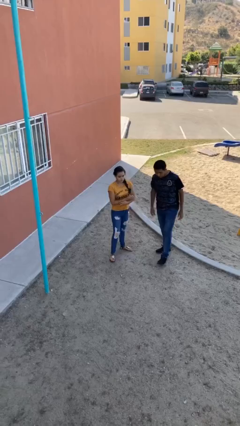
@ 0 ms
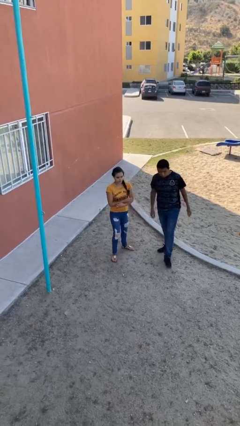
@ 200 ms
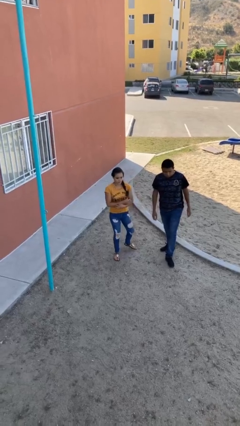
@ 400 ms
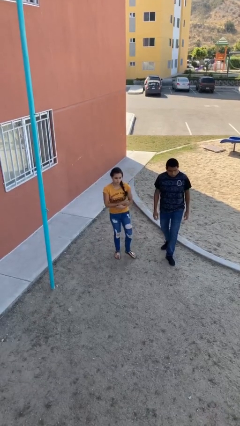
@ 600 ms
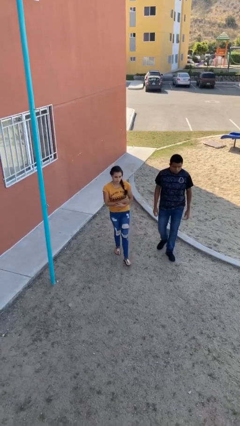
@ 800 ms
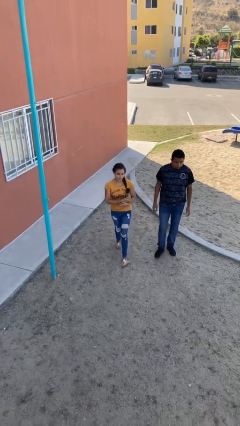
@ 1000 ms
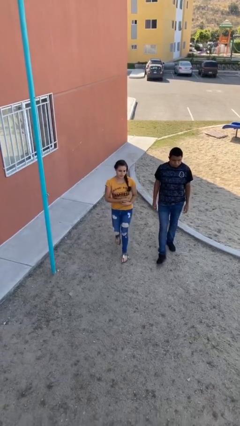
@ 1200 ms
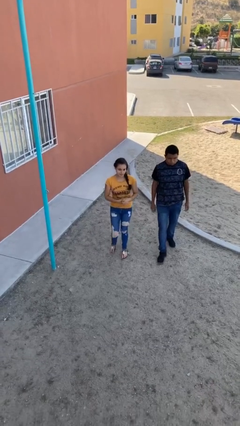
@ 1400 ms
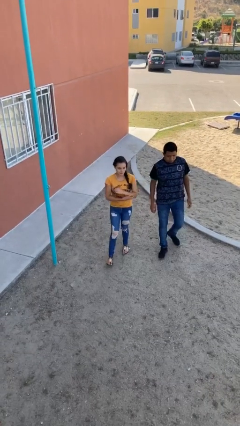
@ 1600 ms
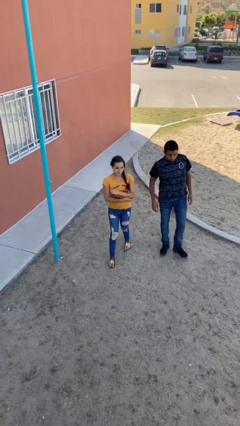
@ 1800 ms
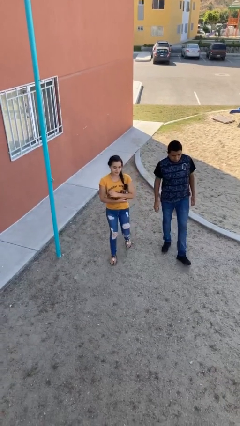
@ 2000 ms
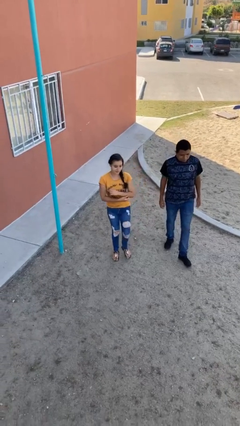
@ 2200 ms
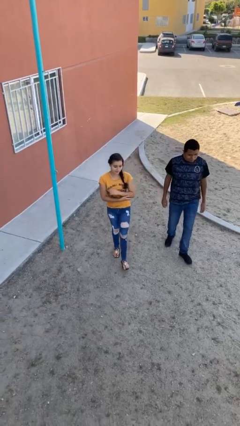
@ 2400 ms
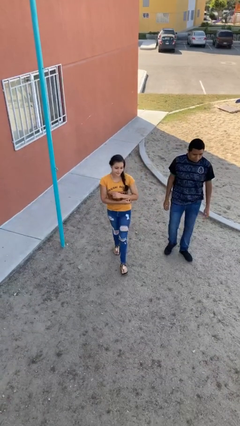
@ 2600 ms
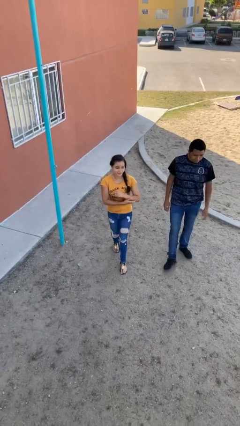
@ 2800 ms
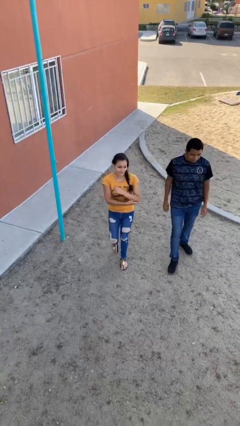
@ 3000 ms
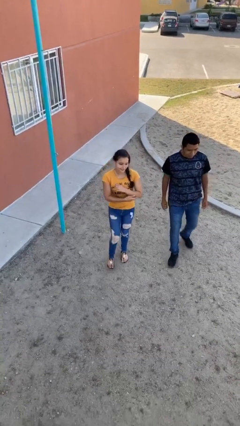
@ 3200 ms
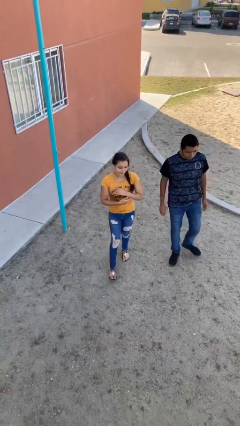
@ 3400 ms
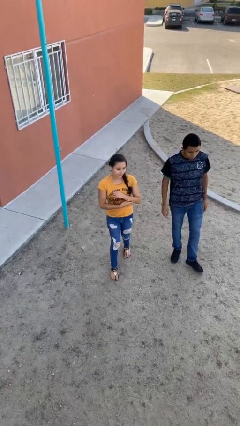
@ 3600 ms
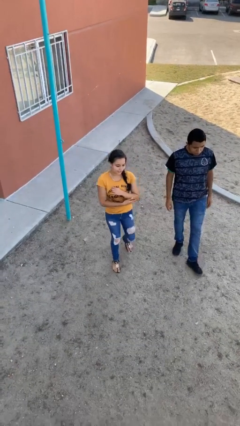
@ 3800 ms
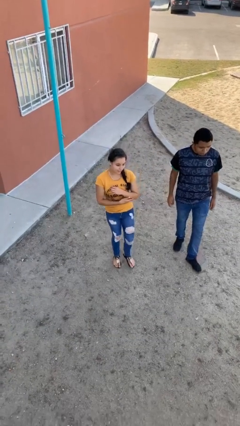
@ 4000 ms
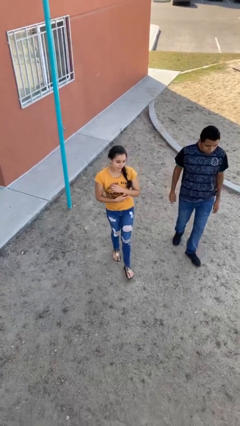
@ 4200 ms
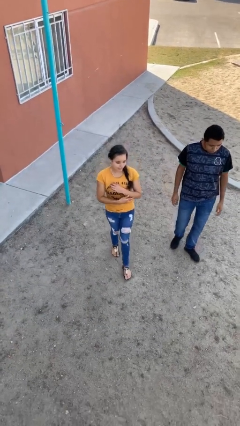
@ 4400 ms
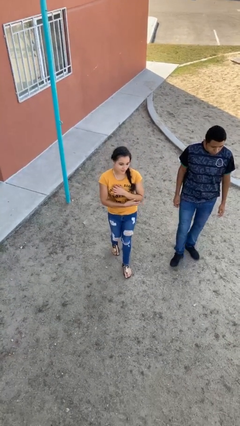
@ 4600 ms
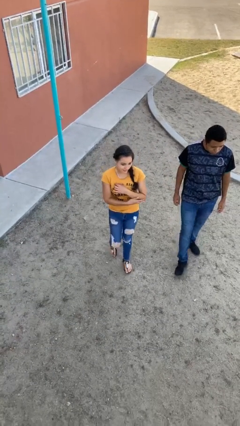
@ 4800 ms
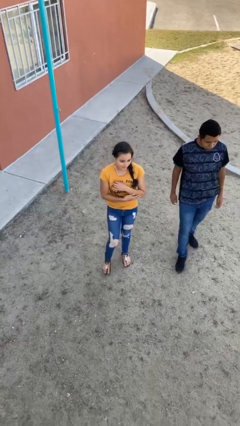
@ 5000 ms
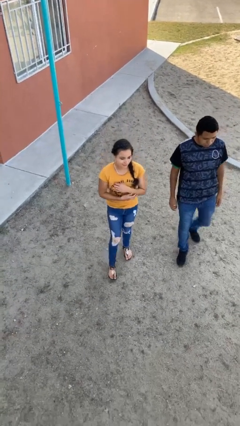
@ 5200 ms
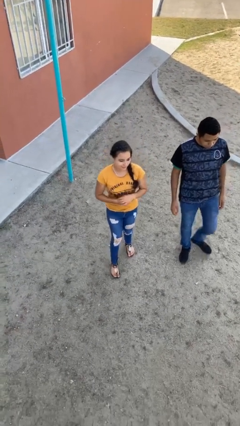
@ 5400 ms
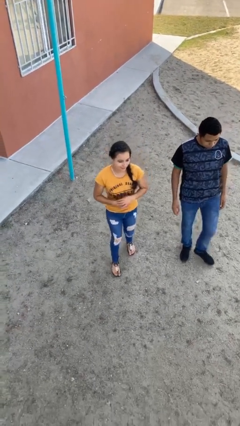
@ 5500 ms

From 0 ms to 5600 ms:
person talks to person

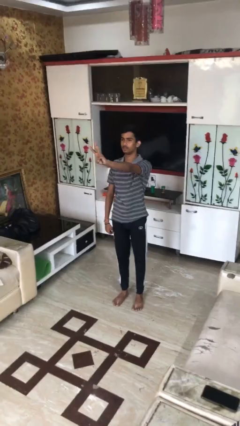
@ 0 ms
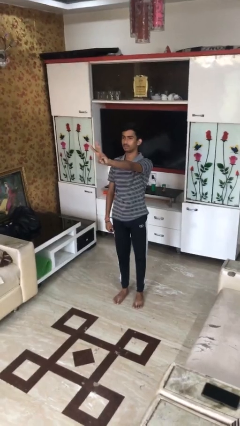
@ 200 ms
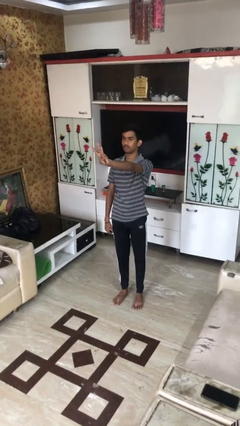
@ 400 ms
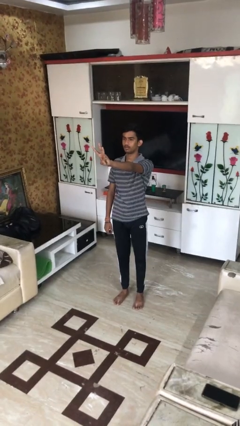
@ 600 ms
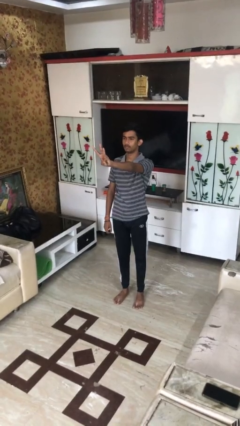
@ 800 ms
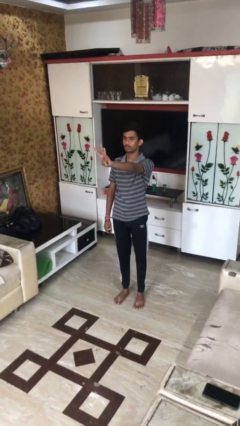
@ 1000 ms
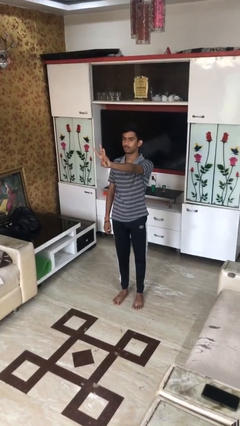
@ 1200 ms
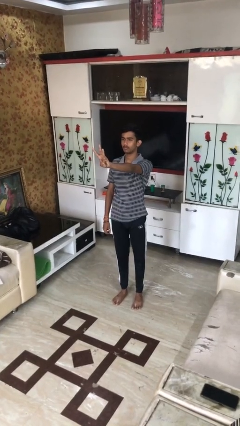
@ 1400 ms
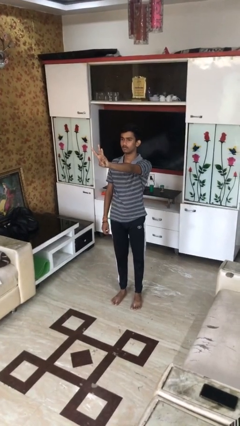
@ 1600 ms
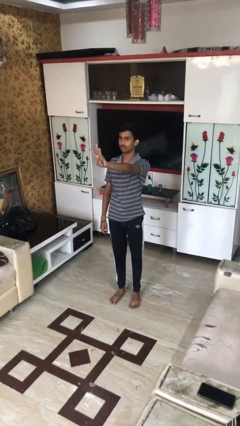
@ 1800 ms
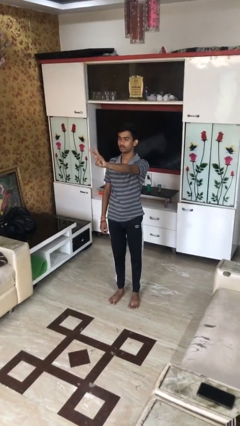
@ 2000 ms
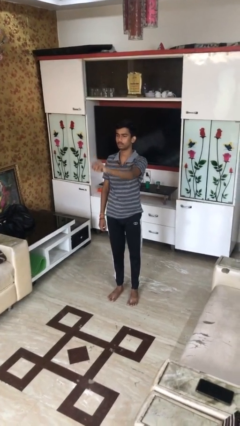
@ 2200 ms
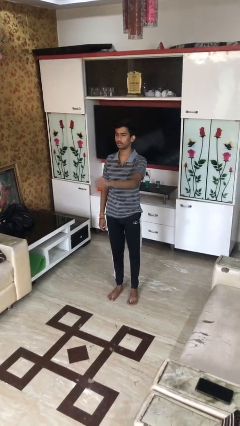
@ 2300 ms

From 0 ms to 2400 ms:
person gestures number three

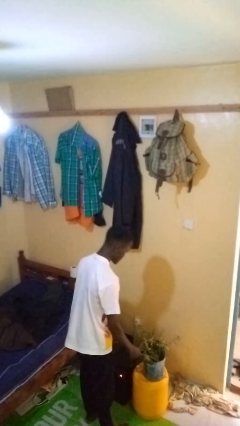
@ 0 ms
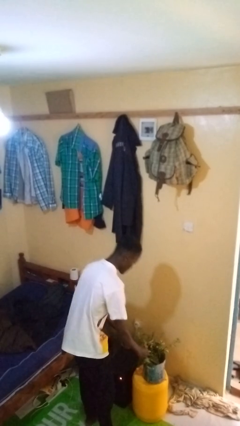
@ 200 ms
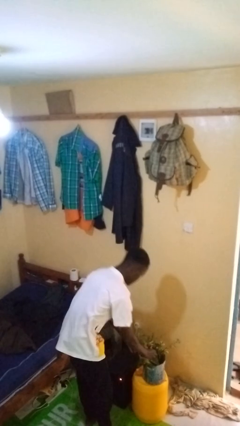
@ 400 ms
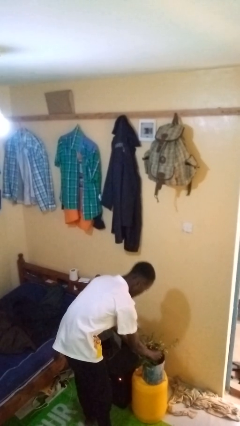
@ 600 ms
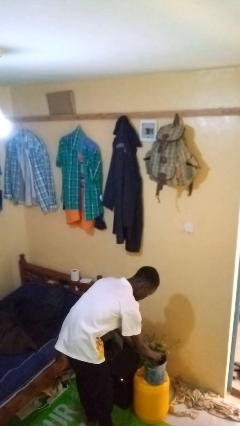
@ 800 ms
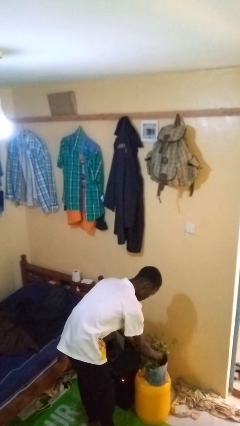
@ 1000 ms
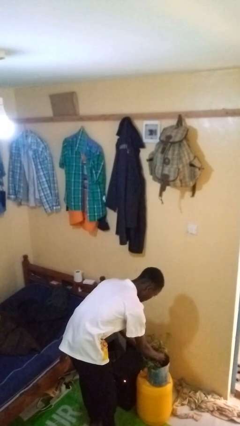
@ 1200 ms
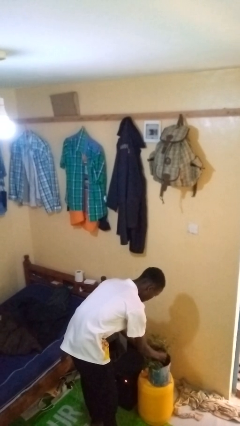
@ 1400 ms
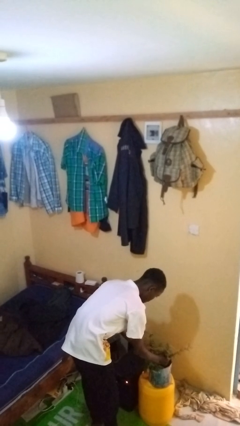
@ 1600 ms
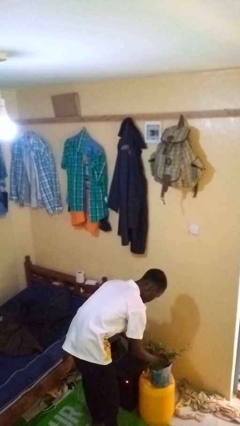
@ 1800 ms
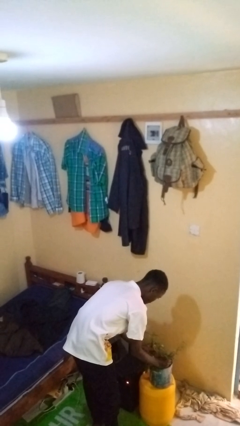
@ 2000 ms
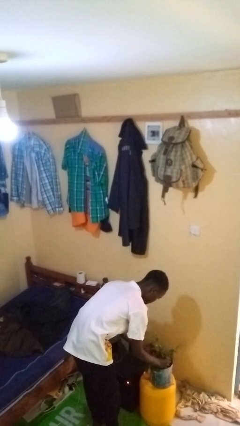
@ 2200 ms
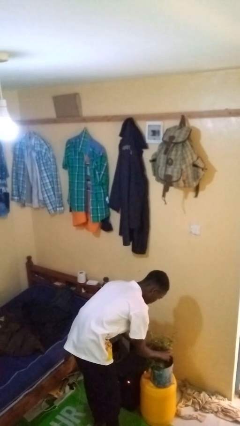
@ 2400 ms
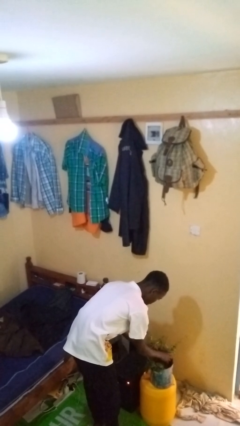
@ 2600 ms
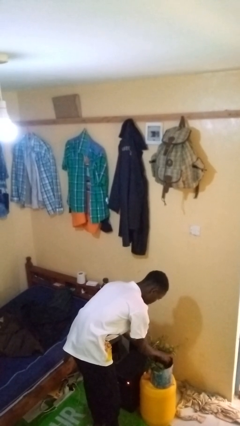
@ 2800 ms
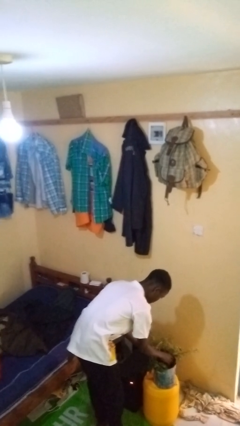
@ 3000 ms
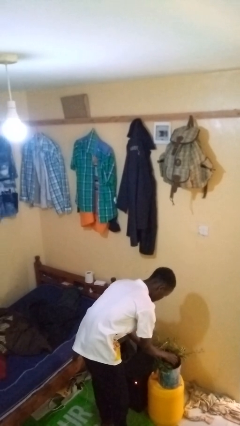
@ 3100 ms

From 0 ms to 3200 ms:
person arranges flowers in vase

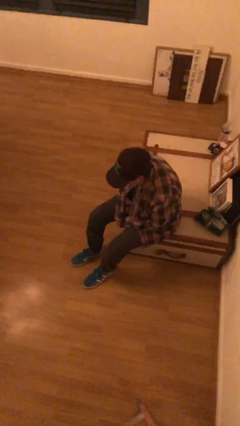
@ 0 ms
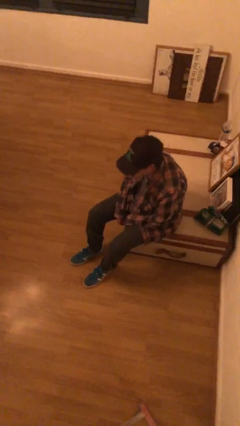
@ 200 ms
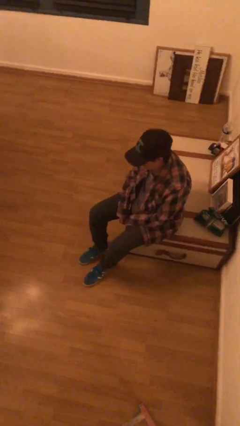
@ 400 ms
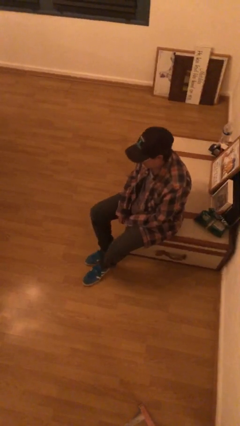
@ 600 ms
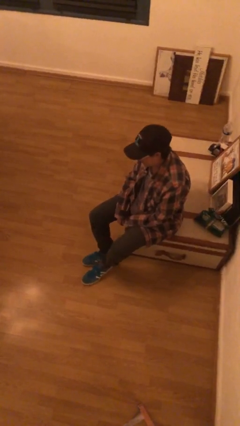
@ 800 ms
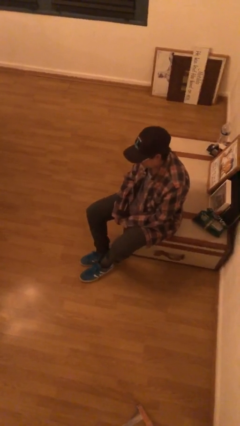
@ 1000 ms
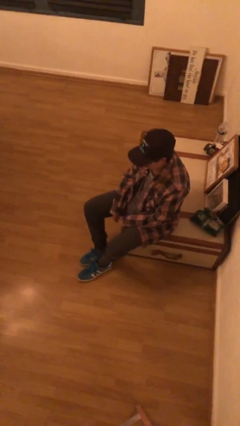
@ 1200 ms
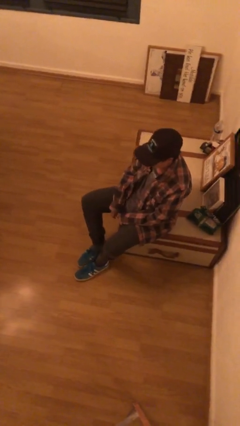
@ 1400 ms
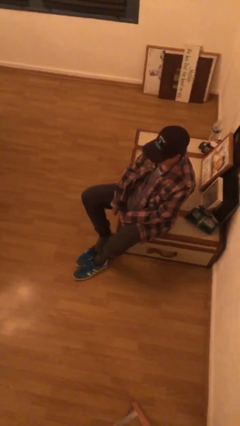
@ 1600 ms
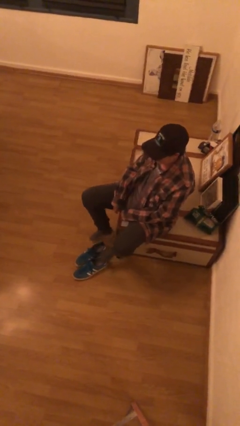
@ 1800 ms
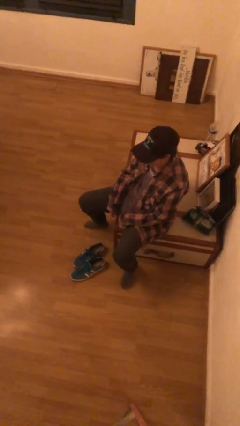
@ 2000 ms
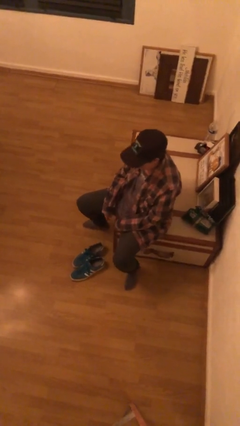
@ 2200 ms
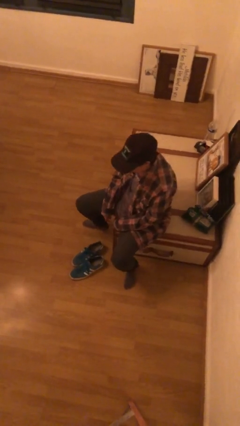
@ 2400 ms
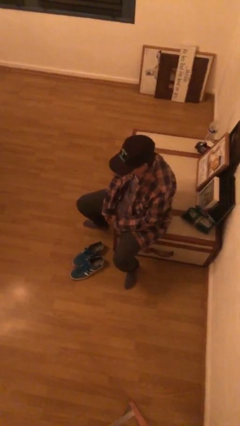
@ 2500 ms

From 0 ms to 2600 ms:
person takes off shoes

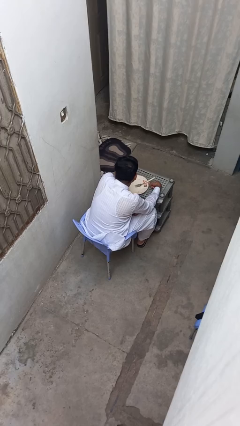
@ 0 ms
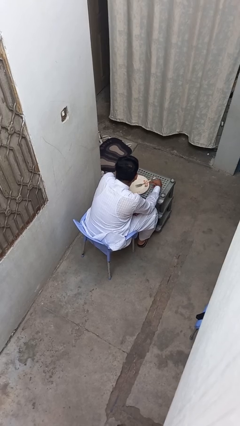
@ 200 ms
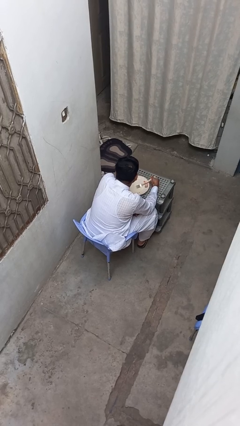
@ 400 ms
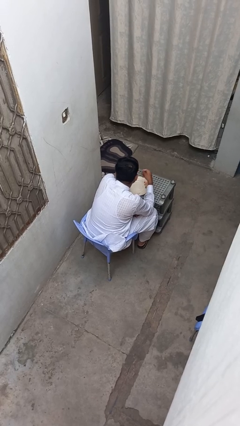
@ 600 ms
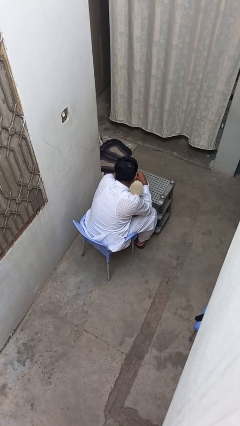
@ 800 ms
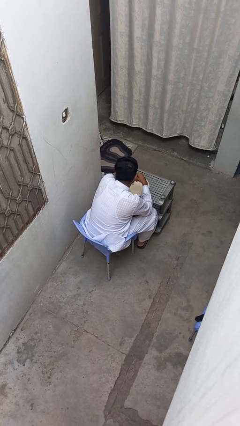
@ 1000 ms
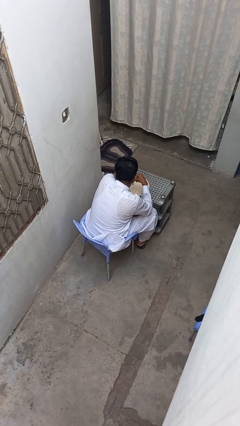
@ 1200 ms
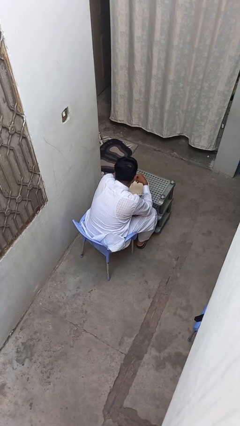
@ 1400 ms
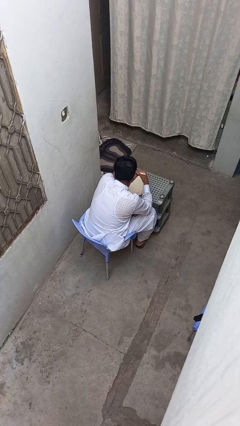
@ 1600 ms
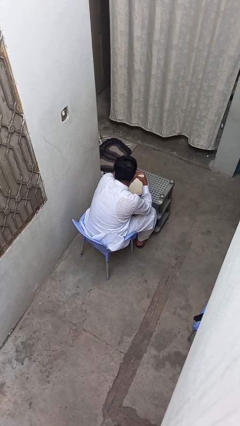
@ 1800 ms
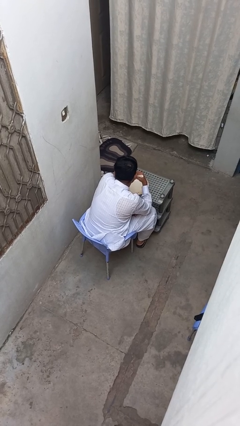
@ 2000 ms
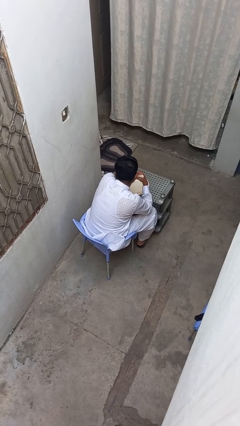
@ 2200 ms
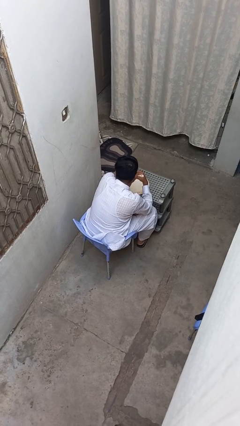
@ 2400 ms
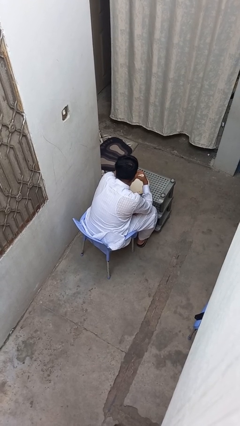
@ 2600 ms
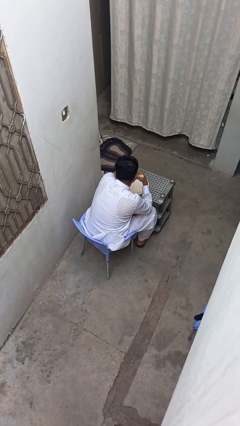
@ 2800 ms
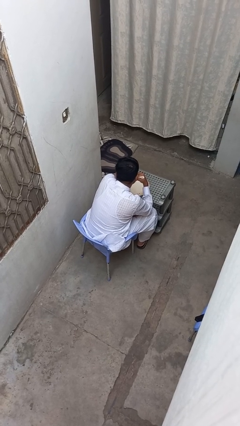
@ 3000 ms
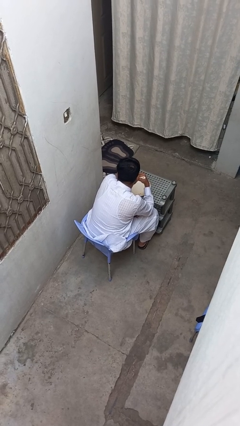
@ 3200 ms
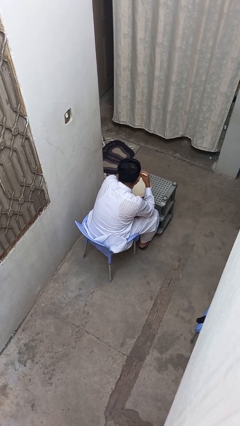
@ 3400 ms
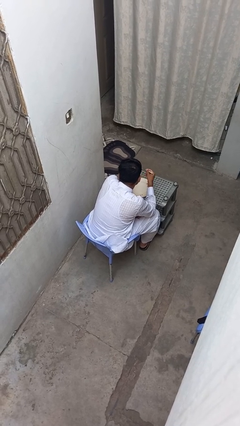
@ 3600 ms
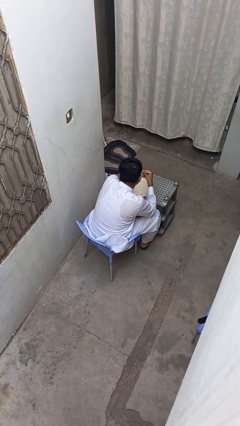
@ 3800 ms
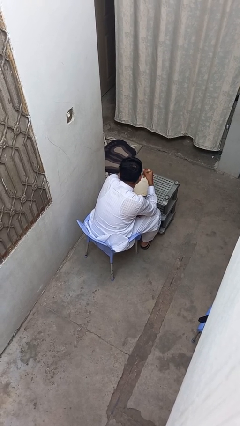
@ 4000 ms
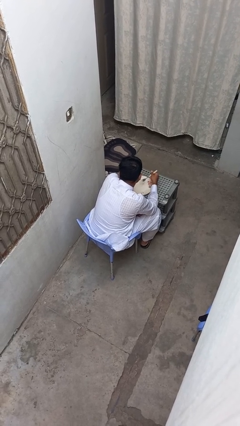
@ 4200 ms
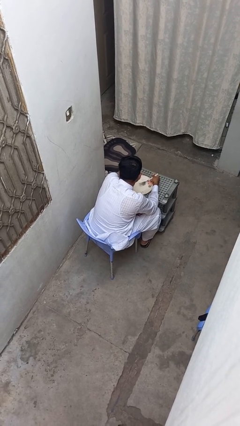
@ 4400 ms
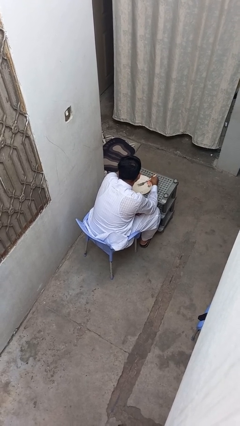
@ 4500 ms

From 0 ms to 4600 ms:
person eats with utensil
